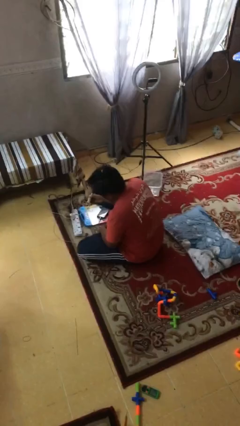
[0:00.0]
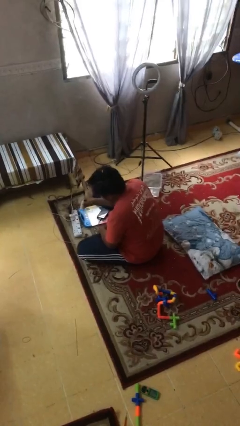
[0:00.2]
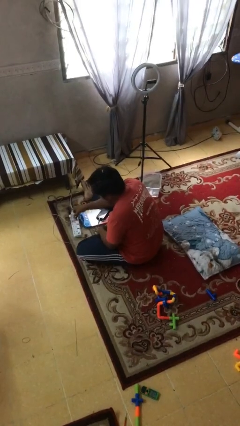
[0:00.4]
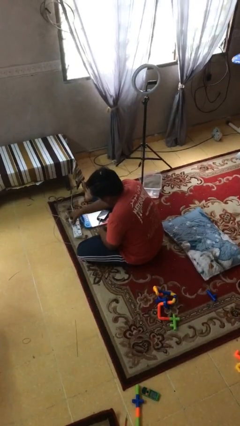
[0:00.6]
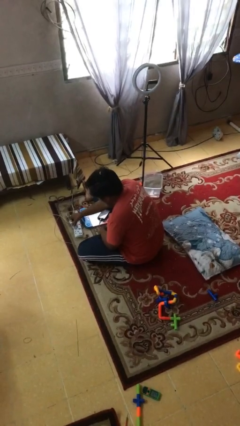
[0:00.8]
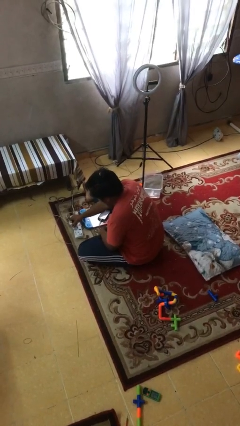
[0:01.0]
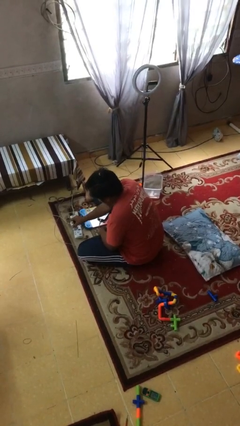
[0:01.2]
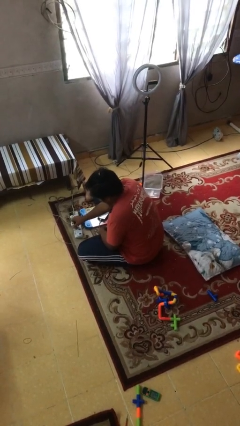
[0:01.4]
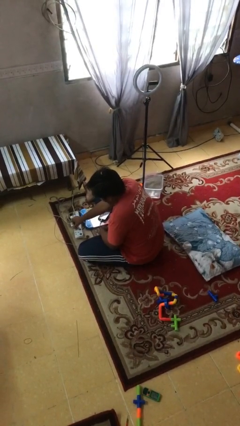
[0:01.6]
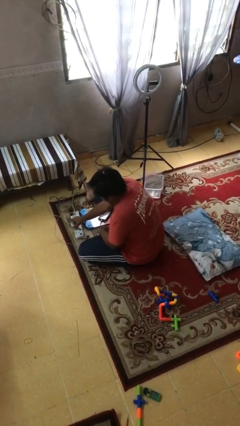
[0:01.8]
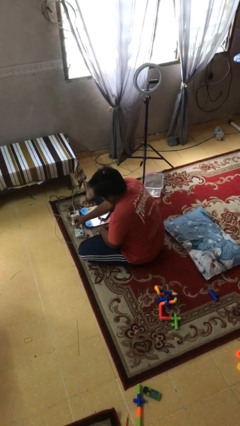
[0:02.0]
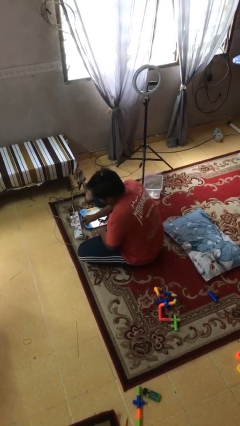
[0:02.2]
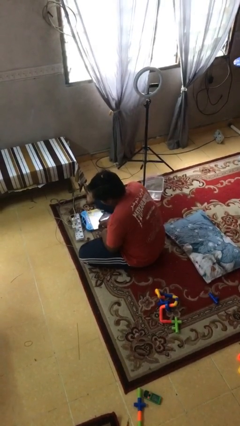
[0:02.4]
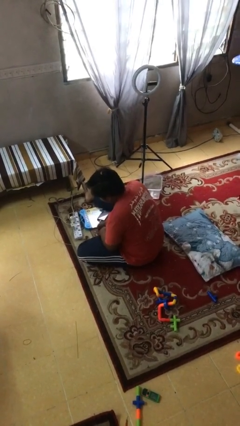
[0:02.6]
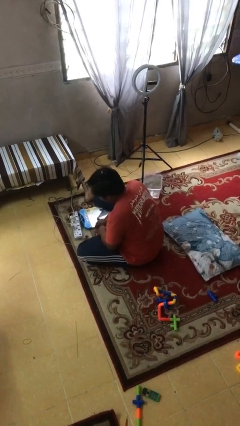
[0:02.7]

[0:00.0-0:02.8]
person plugs into electrical socket

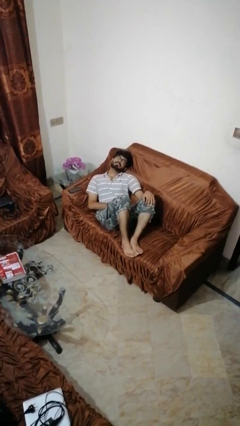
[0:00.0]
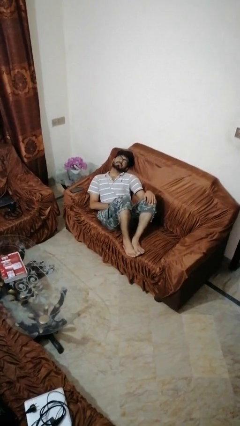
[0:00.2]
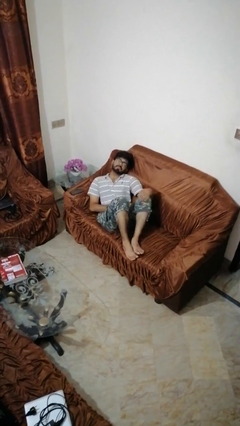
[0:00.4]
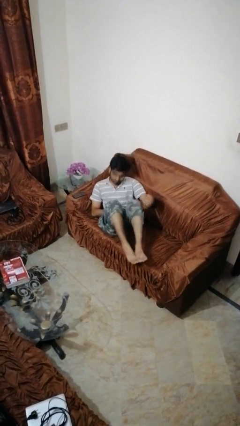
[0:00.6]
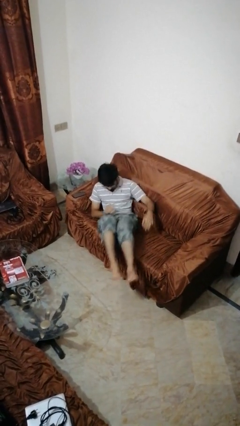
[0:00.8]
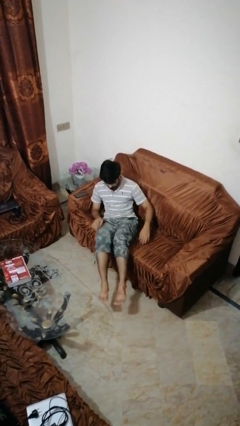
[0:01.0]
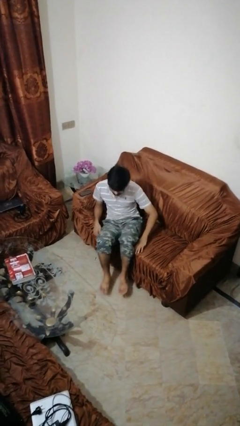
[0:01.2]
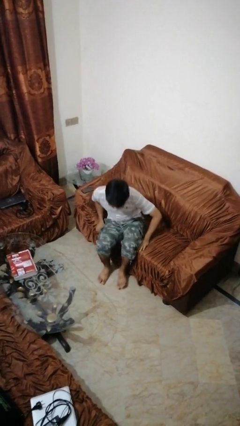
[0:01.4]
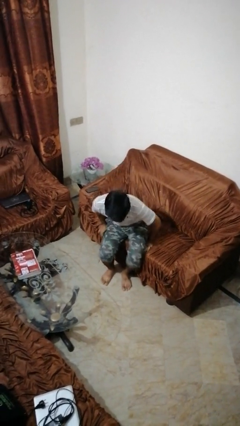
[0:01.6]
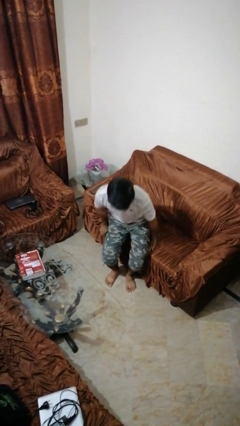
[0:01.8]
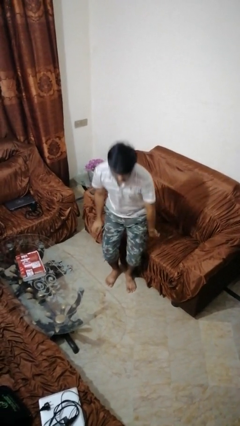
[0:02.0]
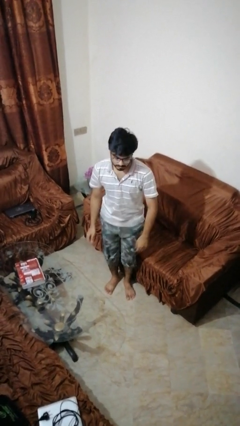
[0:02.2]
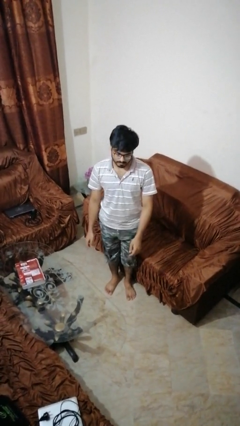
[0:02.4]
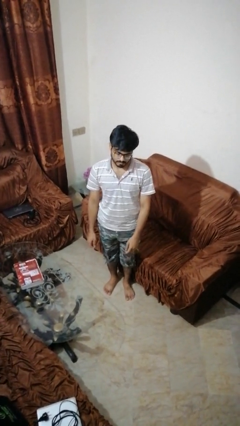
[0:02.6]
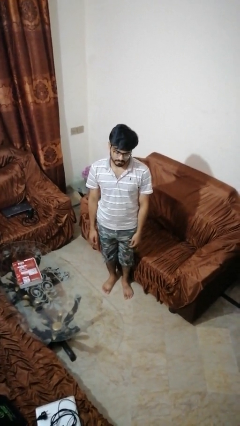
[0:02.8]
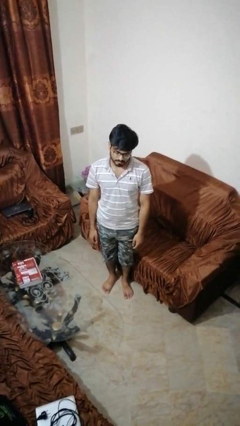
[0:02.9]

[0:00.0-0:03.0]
person stands up

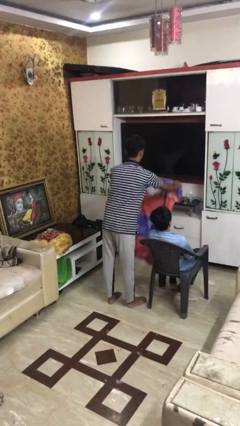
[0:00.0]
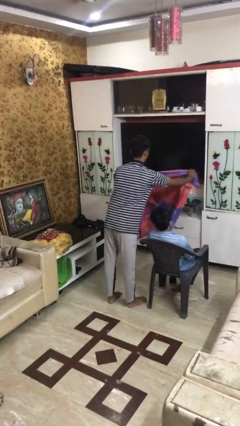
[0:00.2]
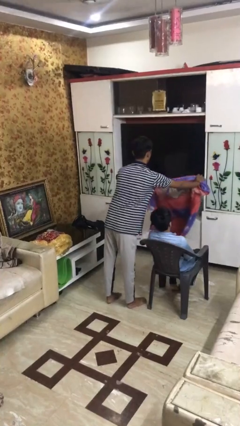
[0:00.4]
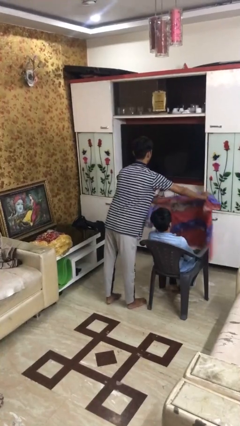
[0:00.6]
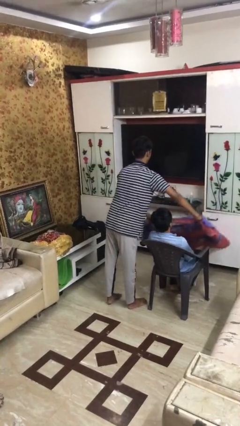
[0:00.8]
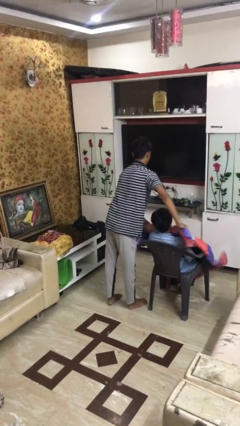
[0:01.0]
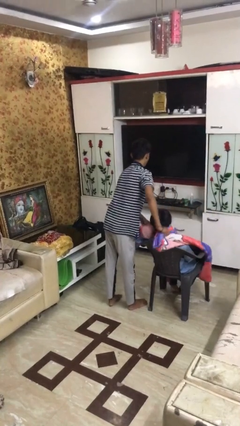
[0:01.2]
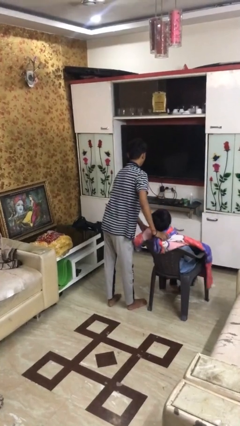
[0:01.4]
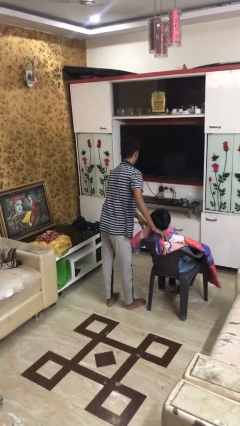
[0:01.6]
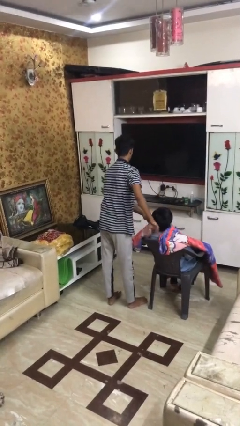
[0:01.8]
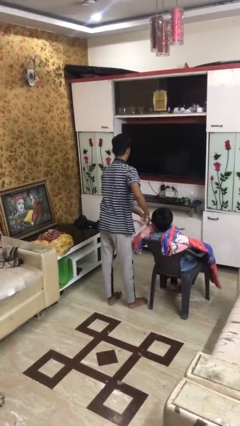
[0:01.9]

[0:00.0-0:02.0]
person covers friend with blanket

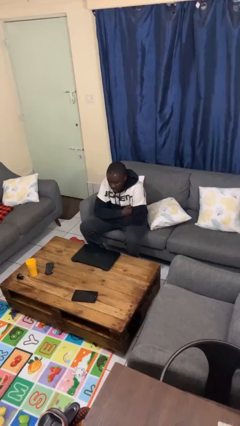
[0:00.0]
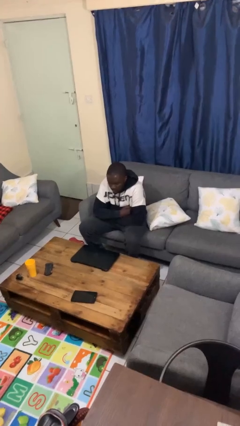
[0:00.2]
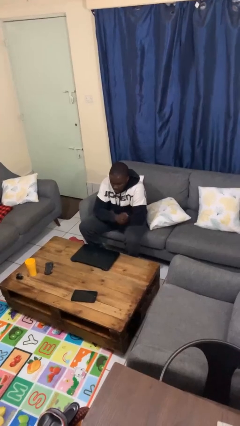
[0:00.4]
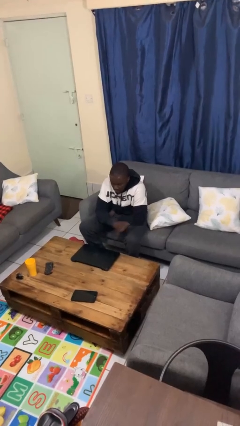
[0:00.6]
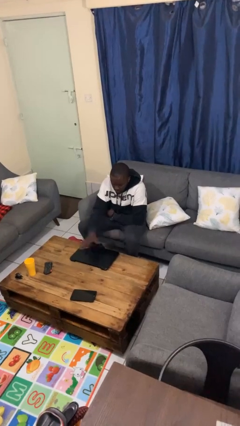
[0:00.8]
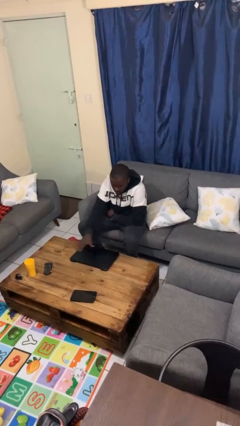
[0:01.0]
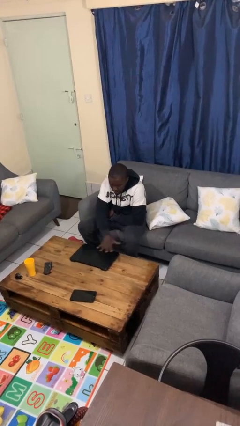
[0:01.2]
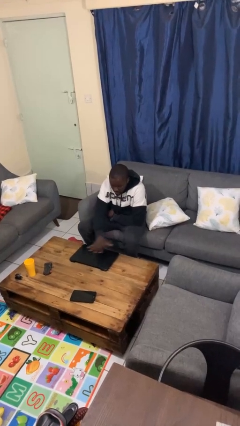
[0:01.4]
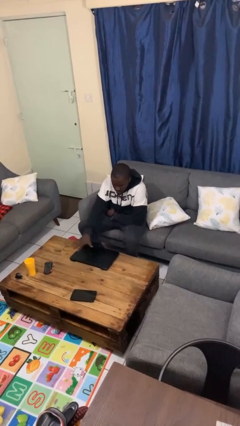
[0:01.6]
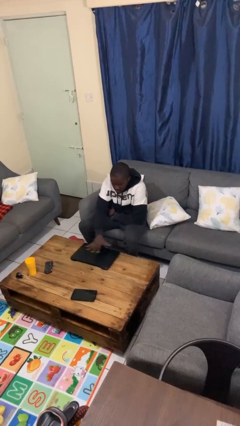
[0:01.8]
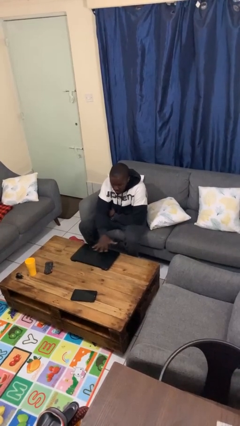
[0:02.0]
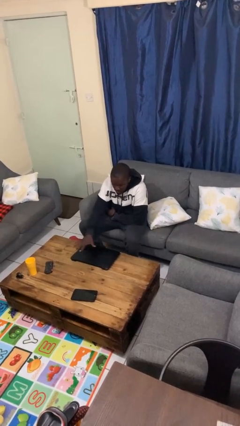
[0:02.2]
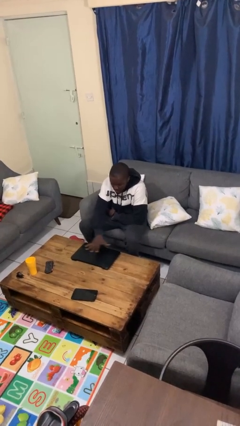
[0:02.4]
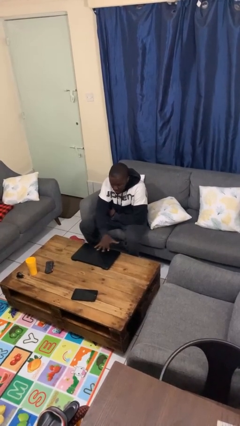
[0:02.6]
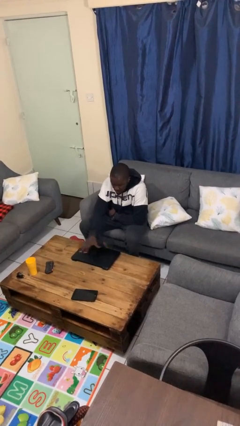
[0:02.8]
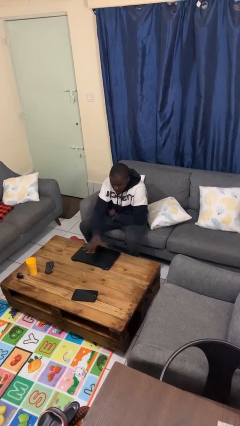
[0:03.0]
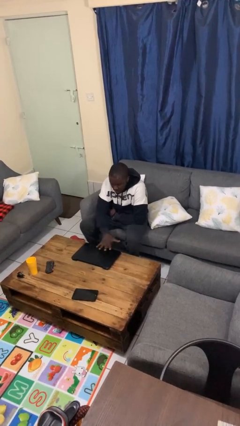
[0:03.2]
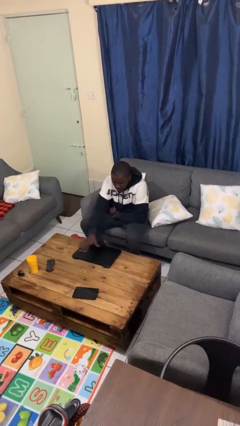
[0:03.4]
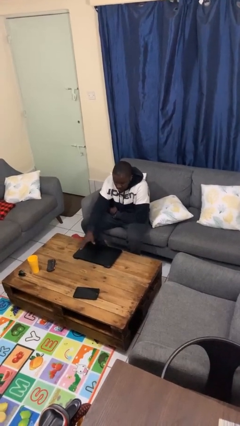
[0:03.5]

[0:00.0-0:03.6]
person waves hand over object

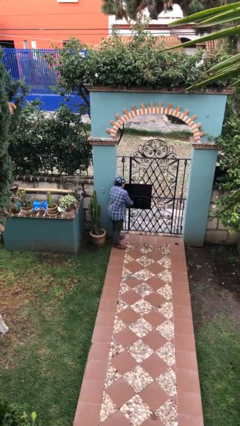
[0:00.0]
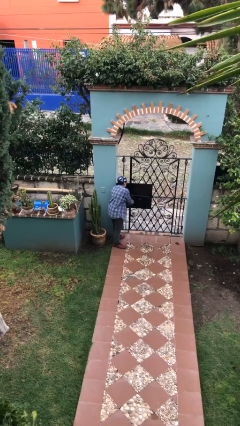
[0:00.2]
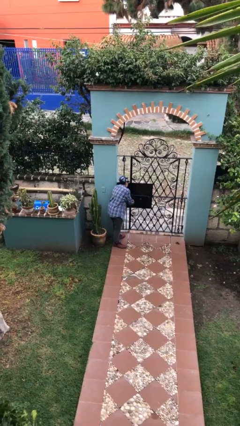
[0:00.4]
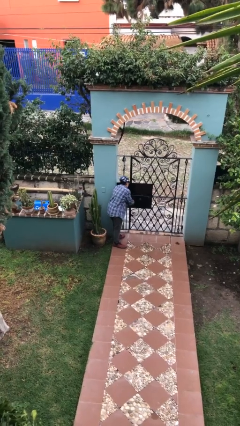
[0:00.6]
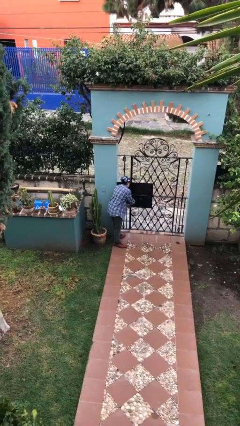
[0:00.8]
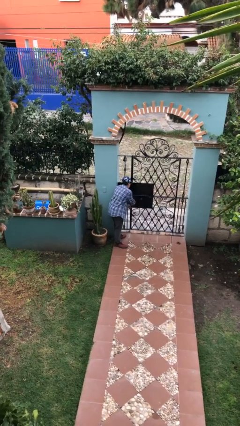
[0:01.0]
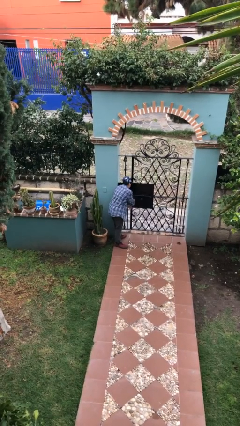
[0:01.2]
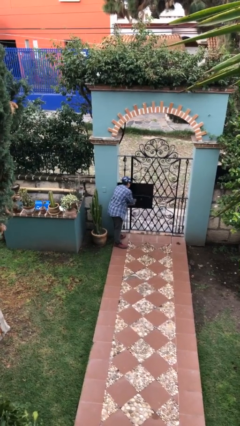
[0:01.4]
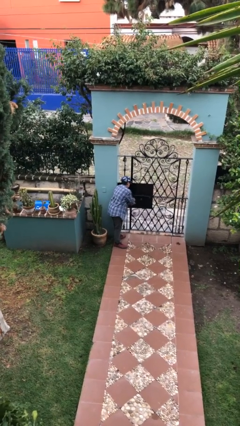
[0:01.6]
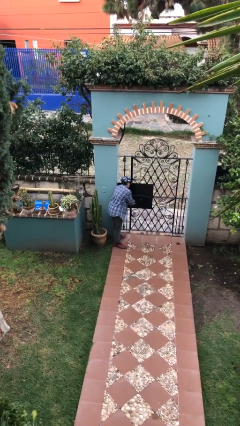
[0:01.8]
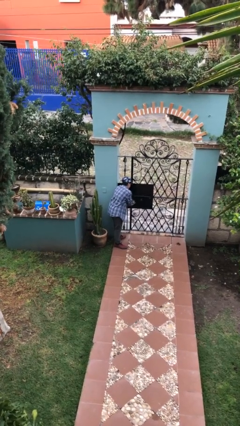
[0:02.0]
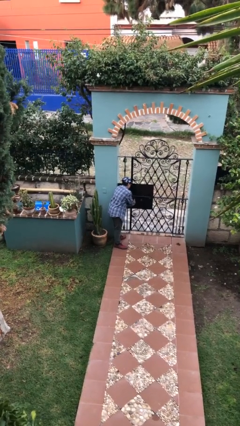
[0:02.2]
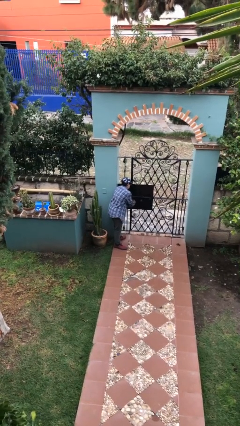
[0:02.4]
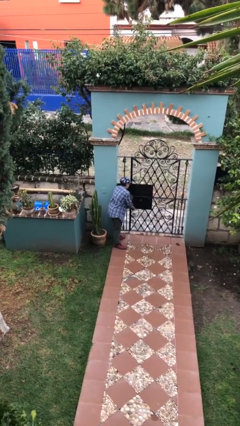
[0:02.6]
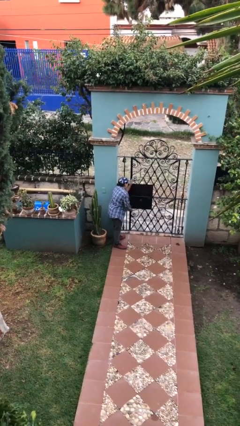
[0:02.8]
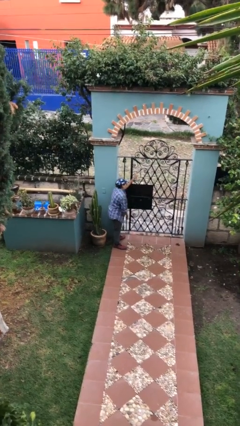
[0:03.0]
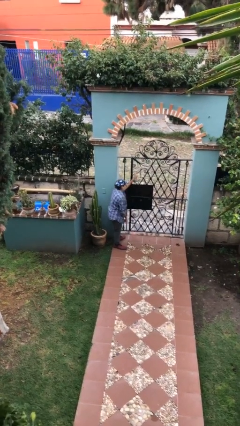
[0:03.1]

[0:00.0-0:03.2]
person unlocks door with keys

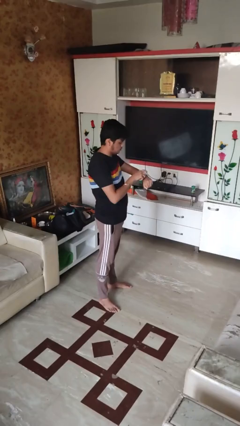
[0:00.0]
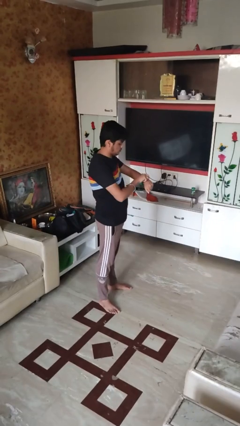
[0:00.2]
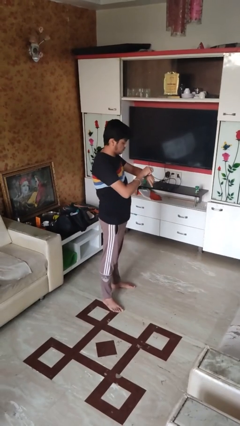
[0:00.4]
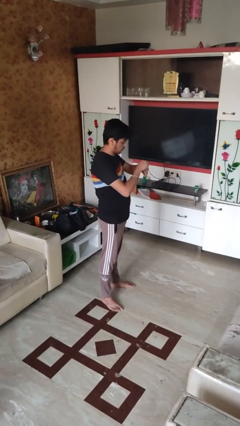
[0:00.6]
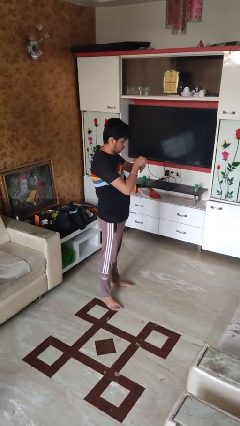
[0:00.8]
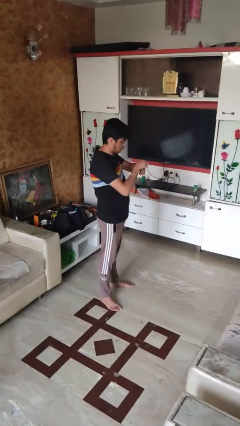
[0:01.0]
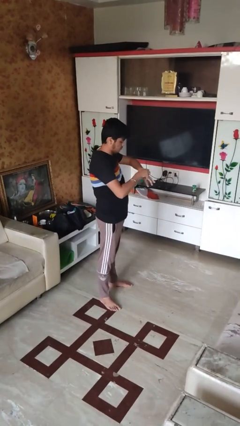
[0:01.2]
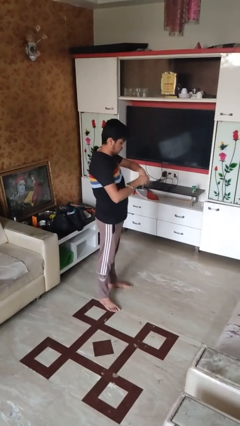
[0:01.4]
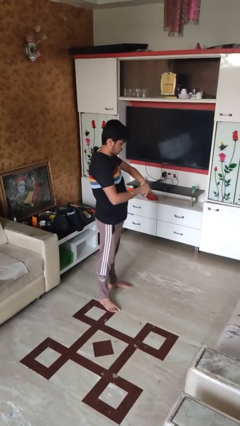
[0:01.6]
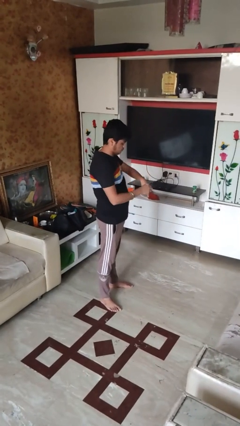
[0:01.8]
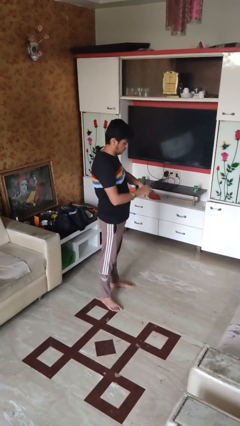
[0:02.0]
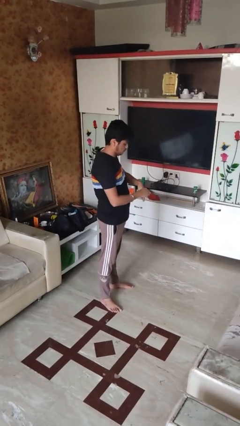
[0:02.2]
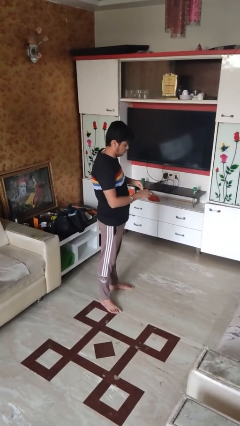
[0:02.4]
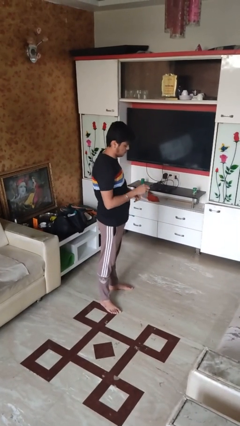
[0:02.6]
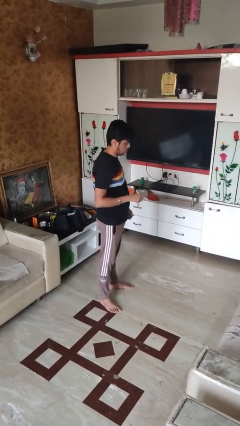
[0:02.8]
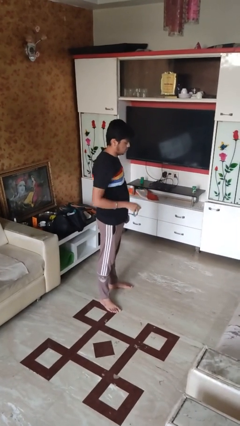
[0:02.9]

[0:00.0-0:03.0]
person takes off wristwatch
